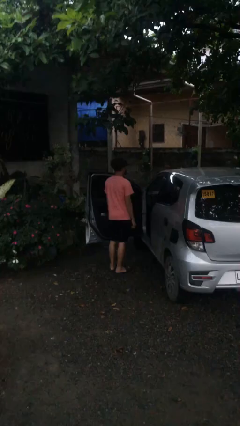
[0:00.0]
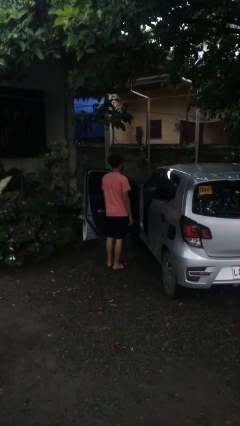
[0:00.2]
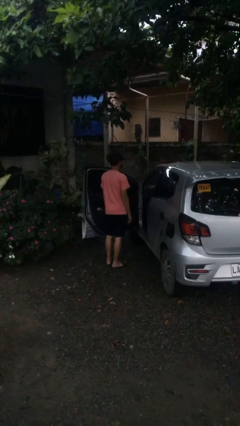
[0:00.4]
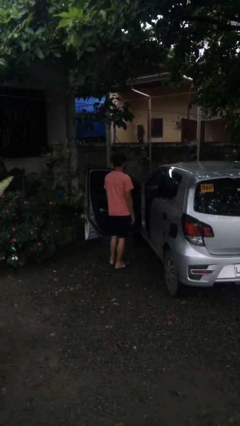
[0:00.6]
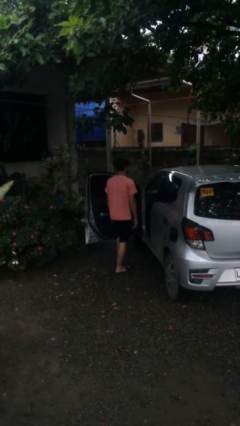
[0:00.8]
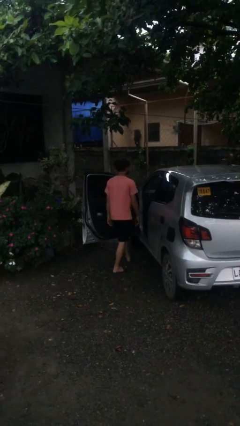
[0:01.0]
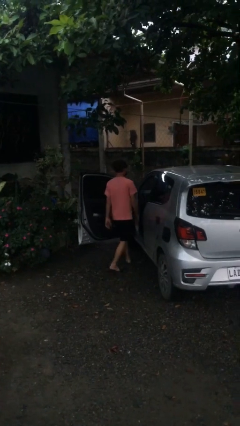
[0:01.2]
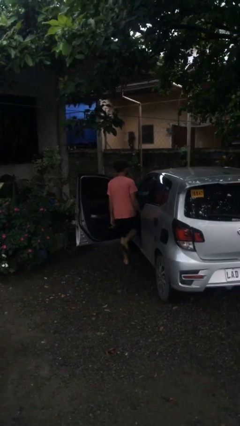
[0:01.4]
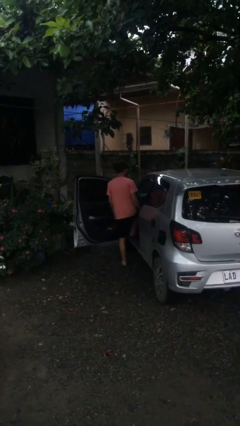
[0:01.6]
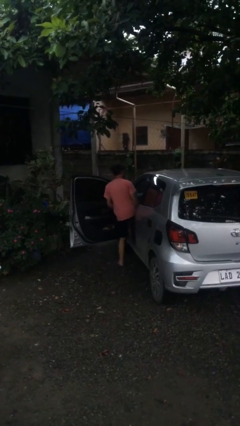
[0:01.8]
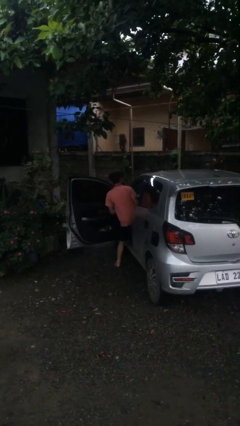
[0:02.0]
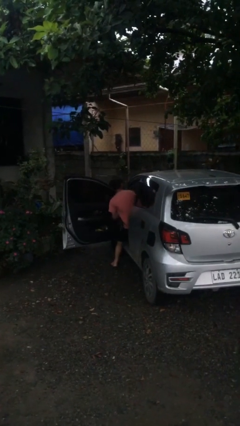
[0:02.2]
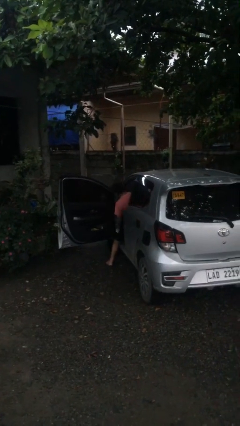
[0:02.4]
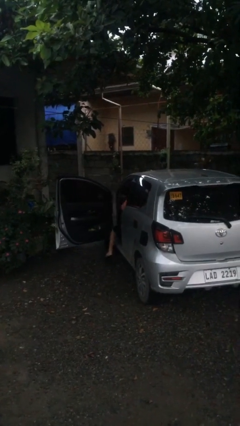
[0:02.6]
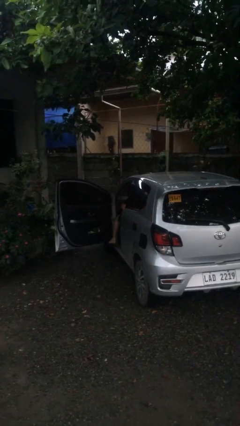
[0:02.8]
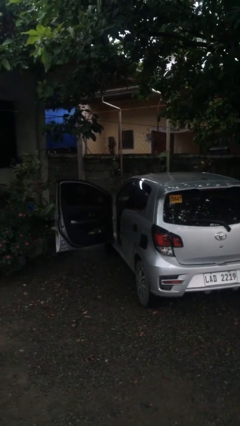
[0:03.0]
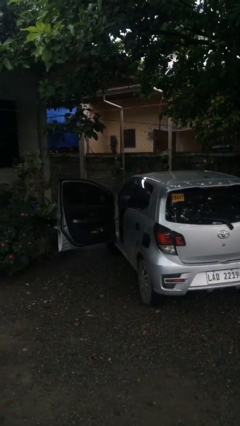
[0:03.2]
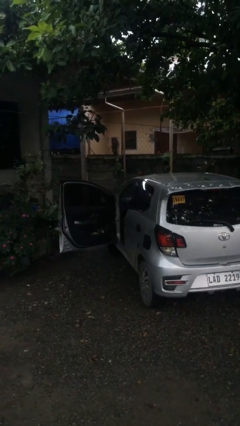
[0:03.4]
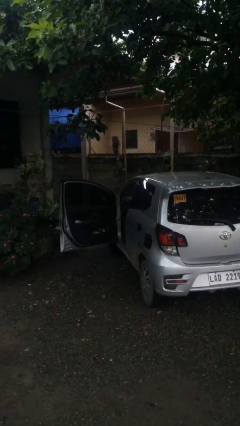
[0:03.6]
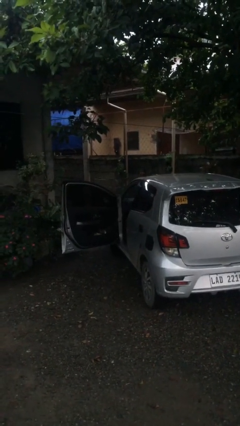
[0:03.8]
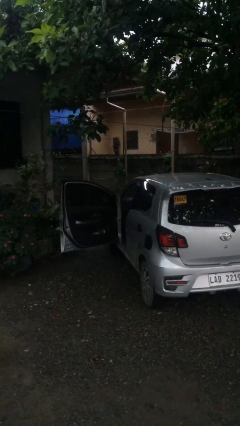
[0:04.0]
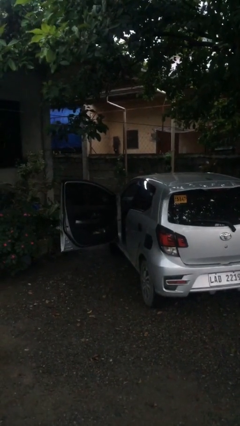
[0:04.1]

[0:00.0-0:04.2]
person enters car

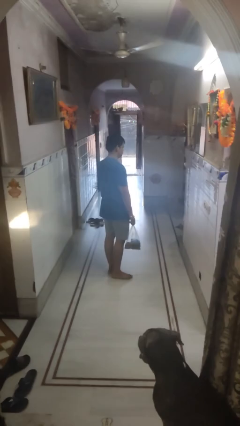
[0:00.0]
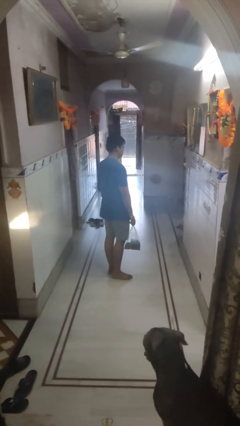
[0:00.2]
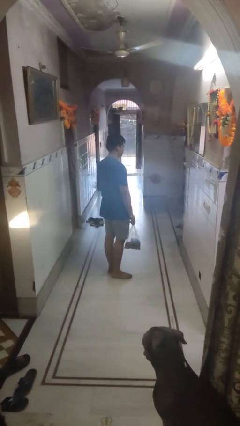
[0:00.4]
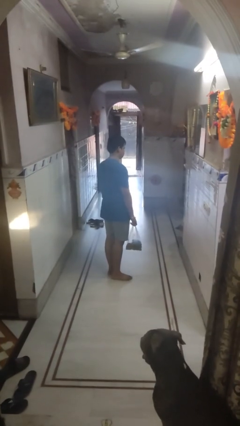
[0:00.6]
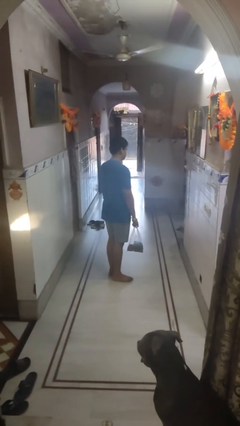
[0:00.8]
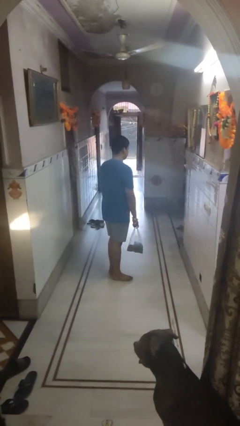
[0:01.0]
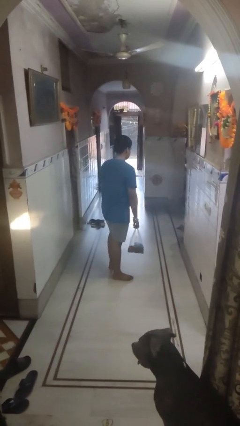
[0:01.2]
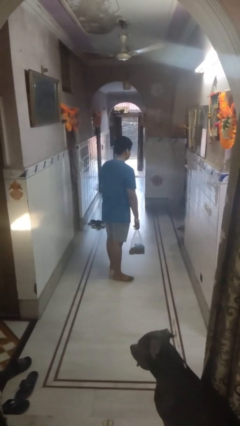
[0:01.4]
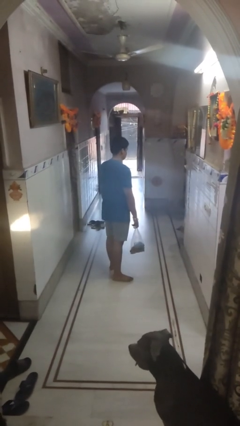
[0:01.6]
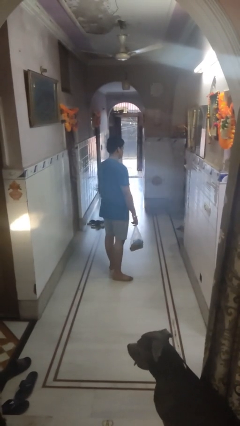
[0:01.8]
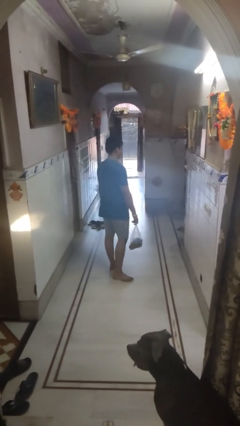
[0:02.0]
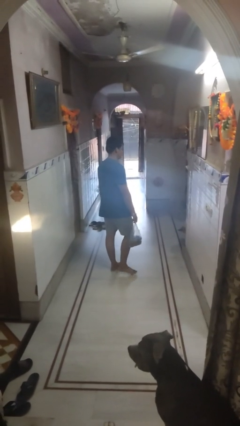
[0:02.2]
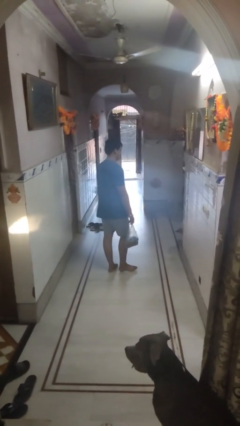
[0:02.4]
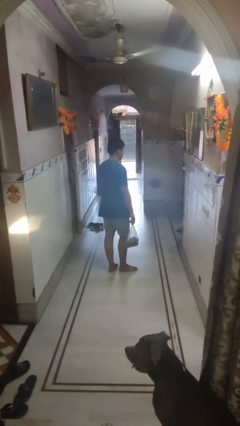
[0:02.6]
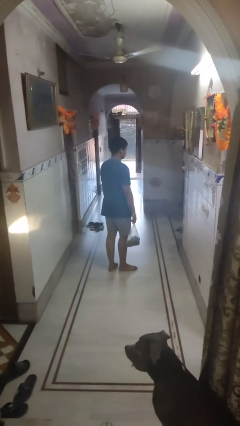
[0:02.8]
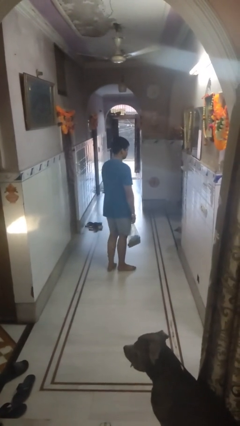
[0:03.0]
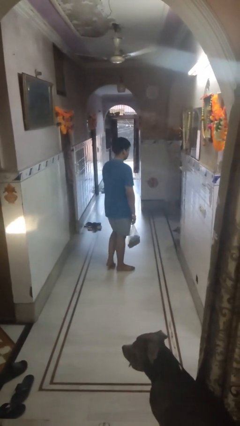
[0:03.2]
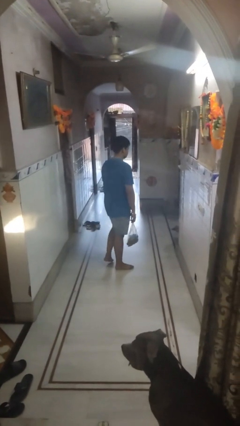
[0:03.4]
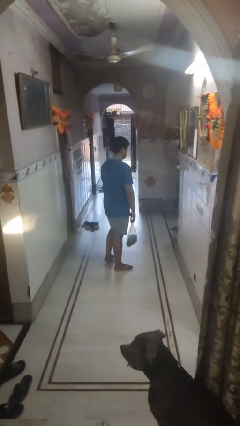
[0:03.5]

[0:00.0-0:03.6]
person carries groceries

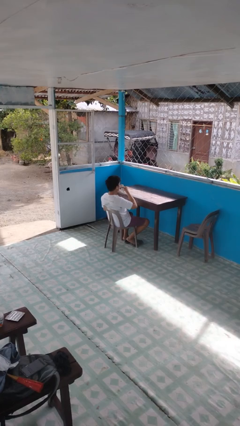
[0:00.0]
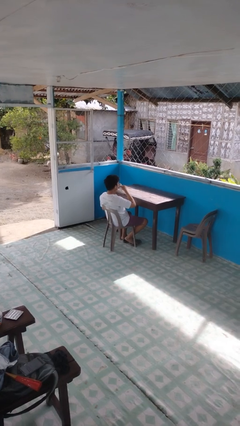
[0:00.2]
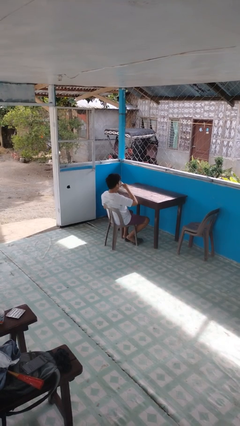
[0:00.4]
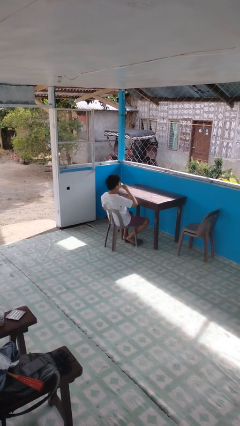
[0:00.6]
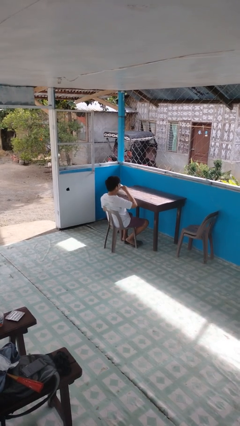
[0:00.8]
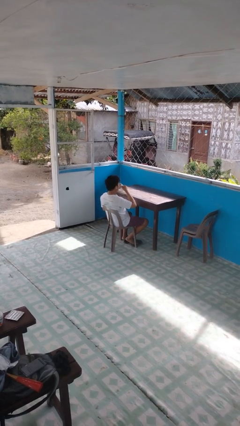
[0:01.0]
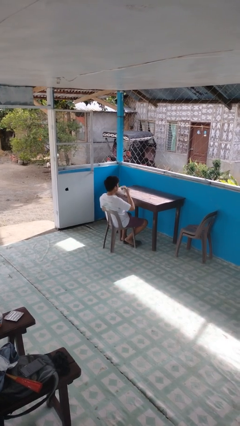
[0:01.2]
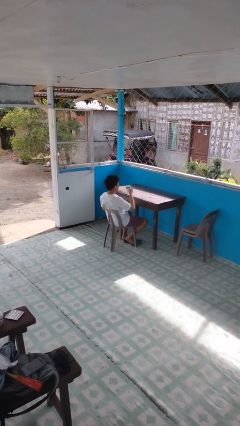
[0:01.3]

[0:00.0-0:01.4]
person drinks from mug

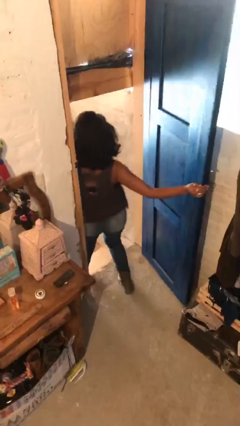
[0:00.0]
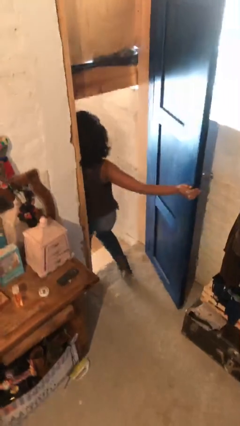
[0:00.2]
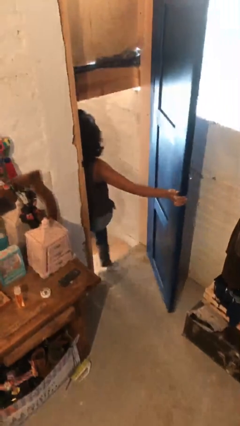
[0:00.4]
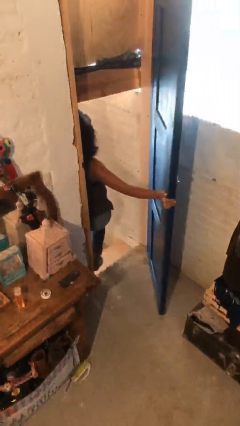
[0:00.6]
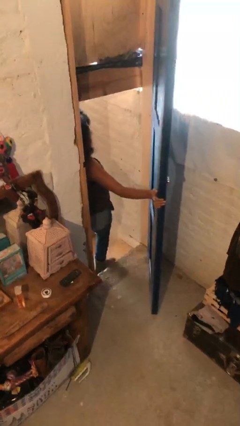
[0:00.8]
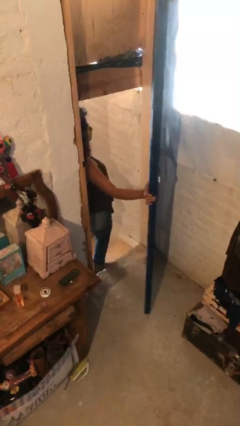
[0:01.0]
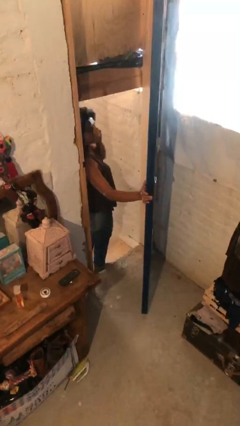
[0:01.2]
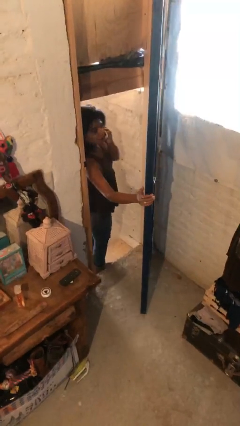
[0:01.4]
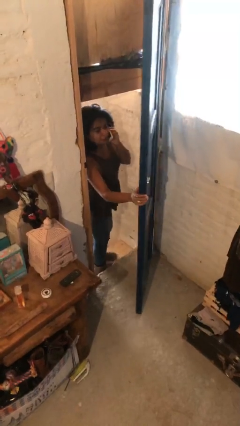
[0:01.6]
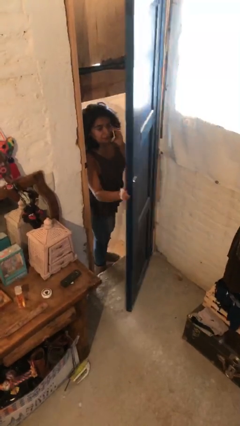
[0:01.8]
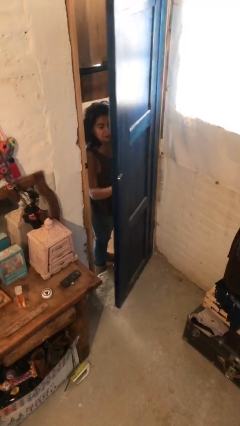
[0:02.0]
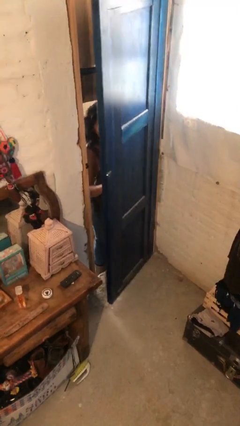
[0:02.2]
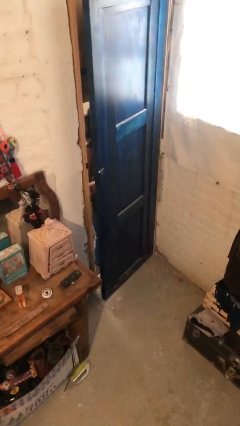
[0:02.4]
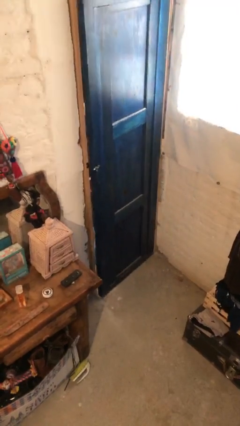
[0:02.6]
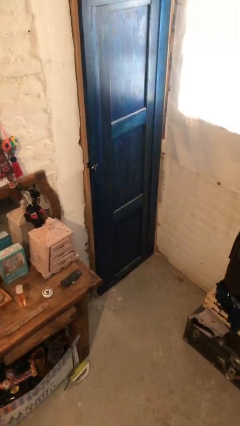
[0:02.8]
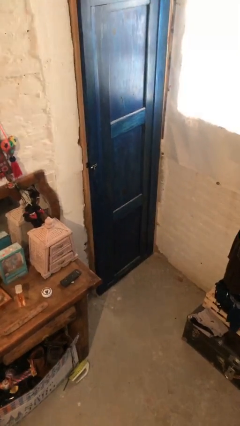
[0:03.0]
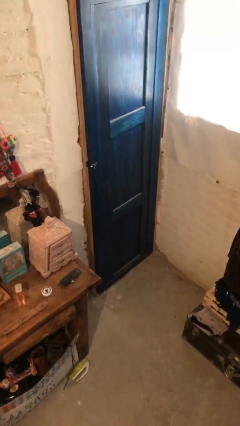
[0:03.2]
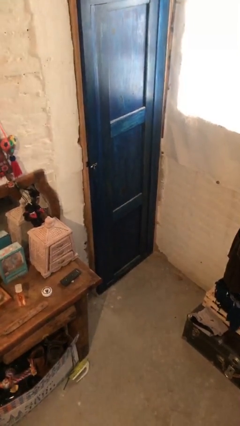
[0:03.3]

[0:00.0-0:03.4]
person closes facility door

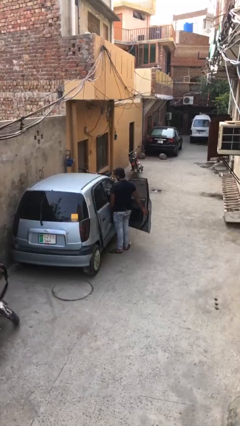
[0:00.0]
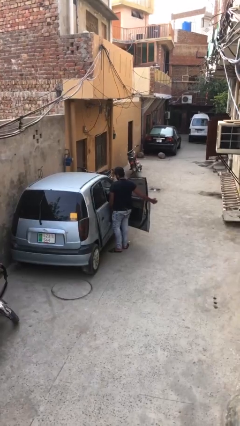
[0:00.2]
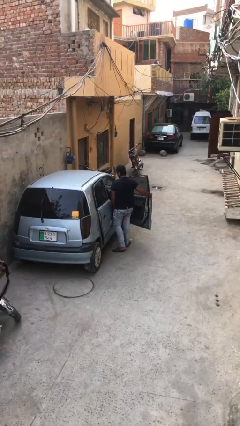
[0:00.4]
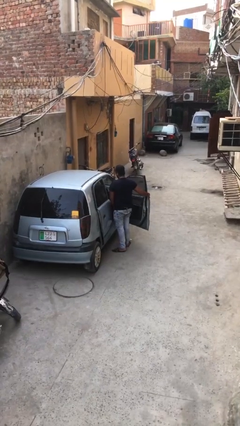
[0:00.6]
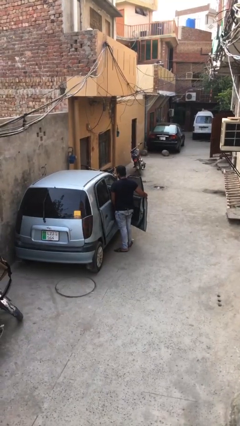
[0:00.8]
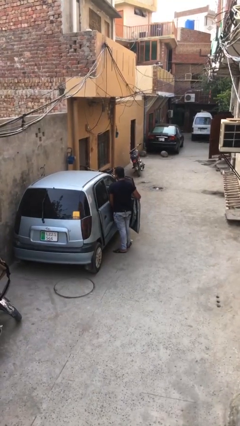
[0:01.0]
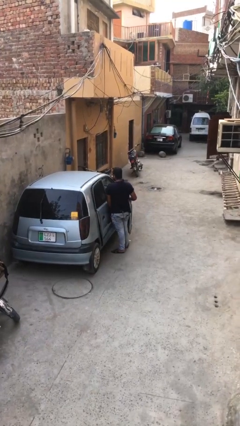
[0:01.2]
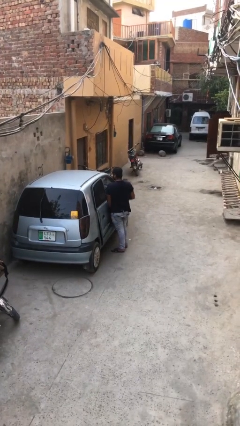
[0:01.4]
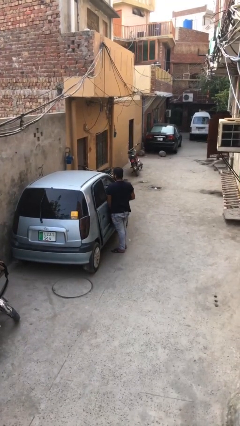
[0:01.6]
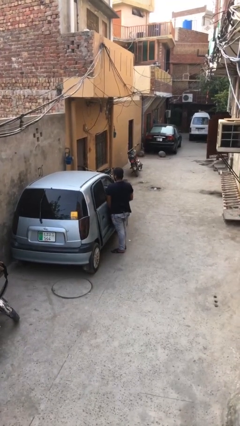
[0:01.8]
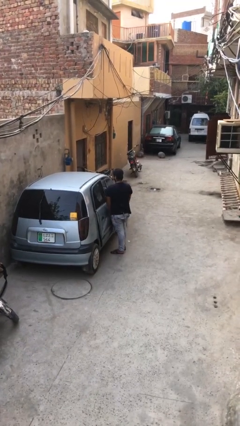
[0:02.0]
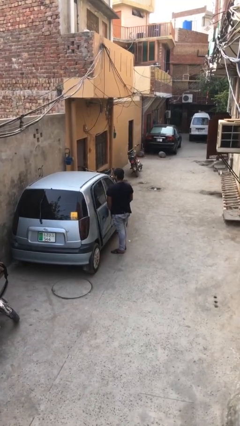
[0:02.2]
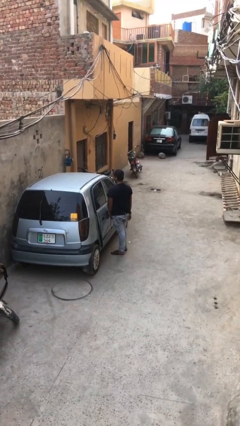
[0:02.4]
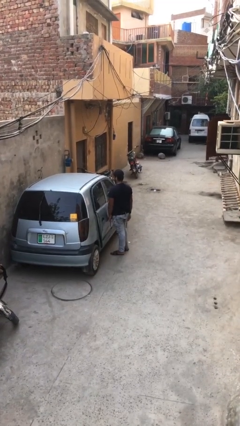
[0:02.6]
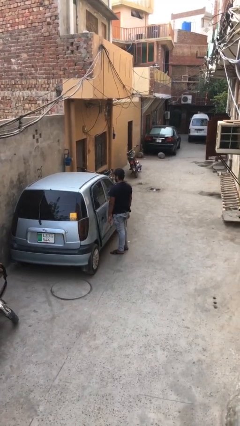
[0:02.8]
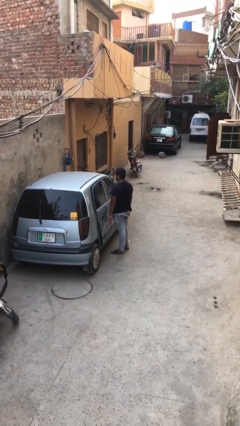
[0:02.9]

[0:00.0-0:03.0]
person closes car door

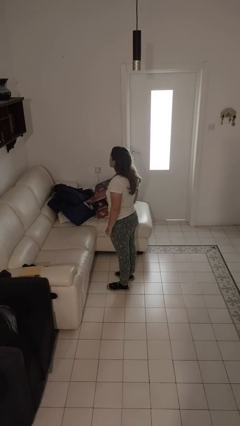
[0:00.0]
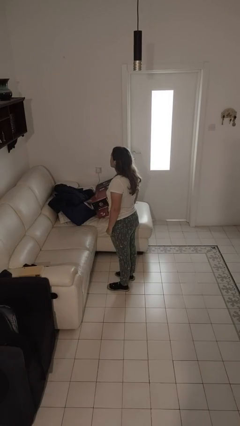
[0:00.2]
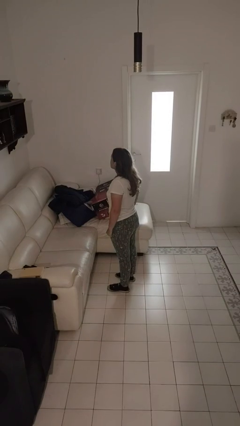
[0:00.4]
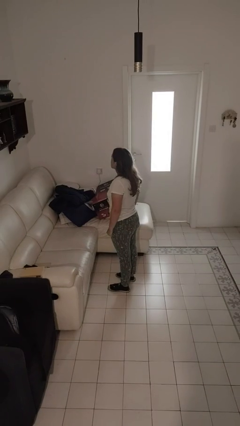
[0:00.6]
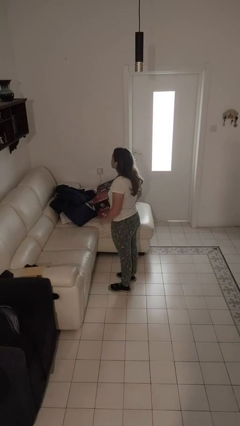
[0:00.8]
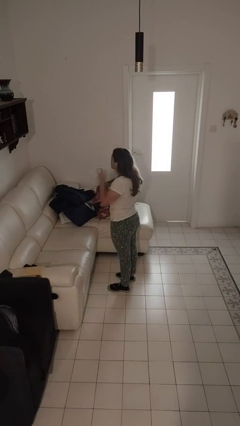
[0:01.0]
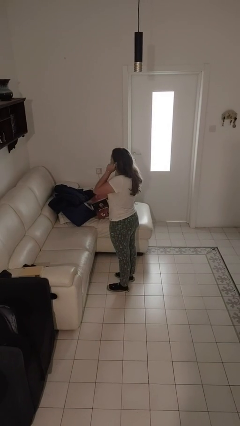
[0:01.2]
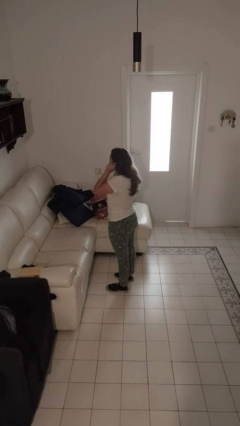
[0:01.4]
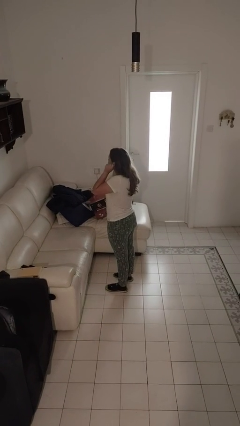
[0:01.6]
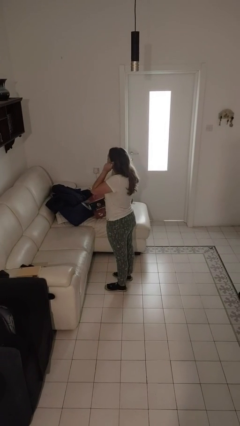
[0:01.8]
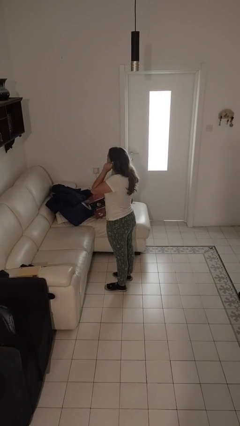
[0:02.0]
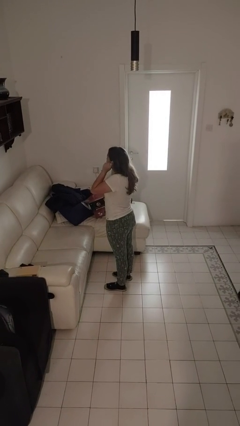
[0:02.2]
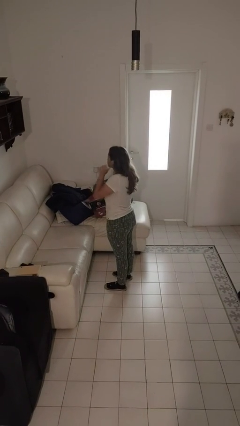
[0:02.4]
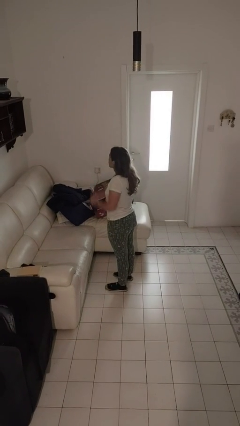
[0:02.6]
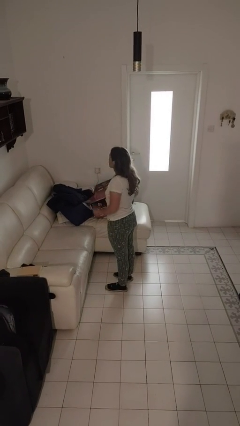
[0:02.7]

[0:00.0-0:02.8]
person touches earlobe
